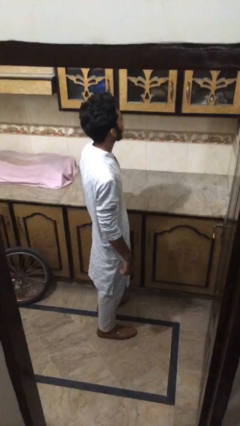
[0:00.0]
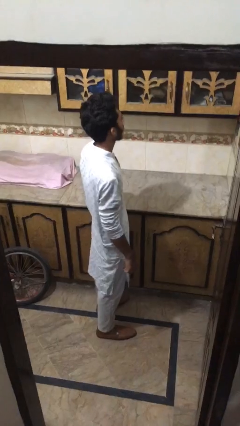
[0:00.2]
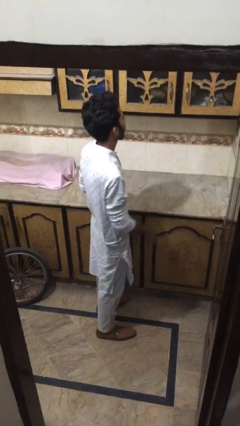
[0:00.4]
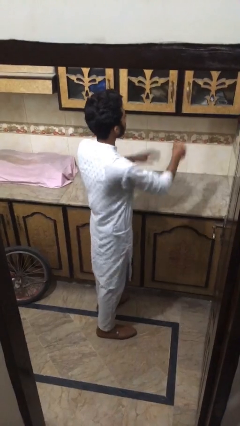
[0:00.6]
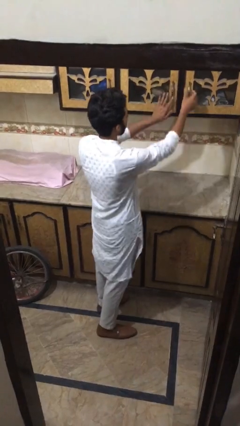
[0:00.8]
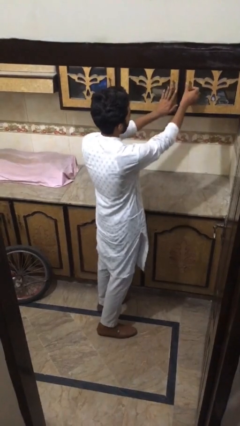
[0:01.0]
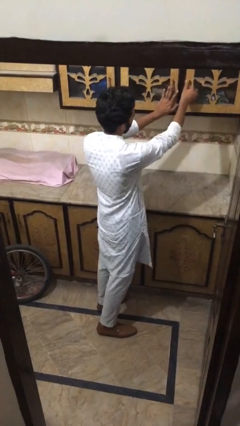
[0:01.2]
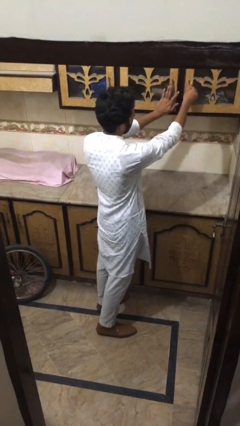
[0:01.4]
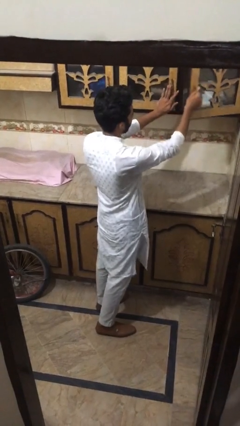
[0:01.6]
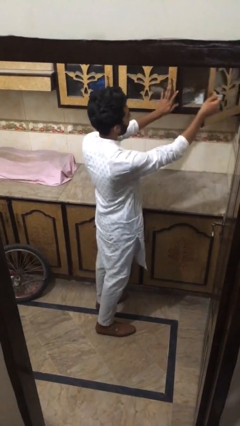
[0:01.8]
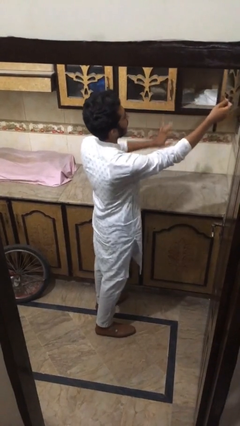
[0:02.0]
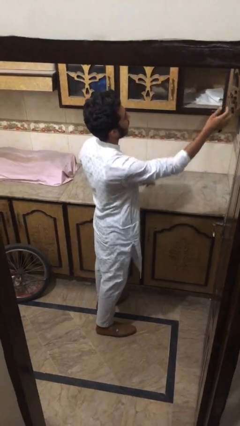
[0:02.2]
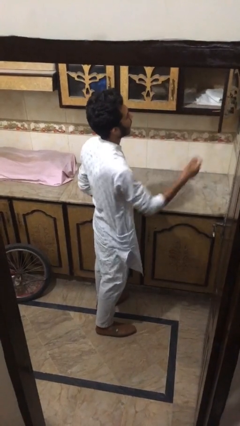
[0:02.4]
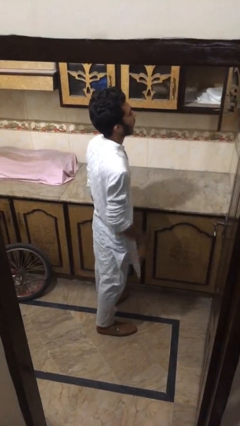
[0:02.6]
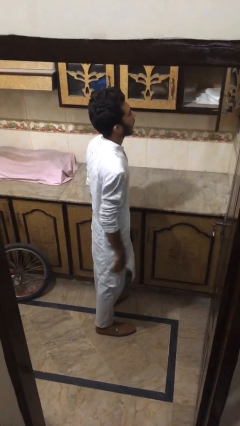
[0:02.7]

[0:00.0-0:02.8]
person opens cabinet

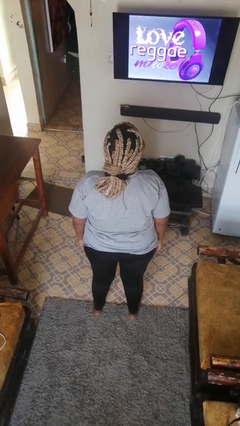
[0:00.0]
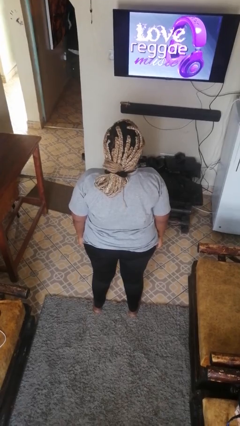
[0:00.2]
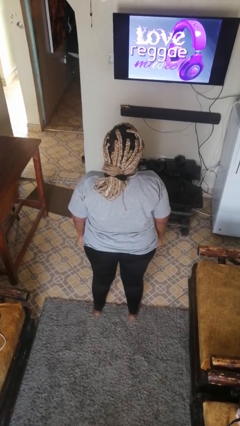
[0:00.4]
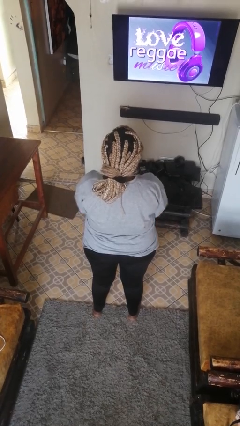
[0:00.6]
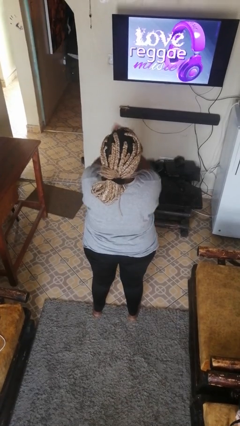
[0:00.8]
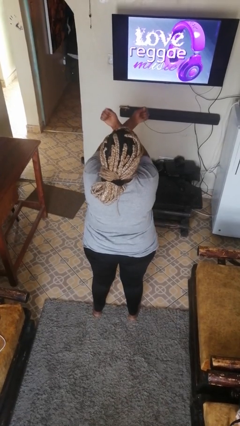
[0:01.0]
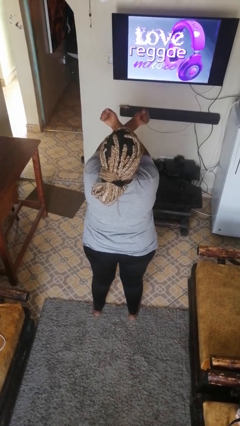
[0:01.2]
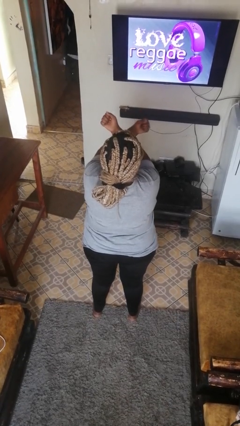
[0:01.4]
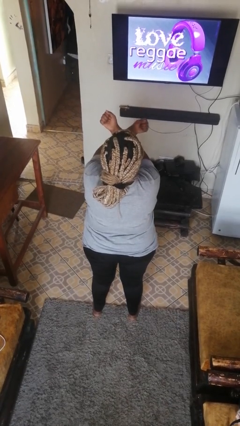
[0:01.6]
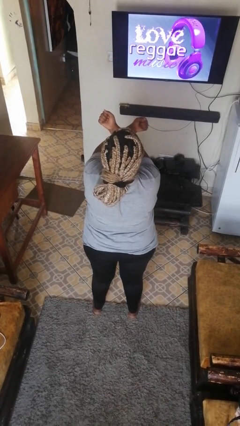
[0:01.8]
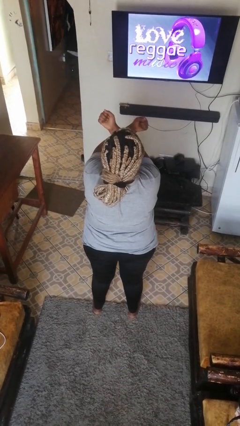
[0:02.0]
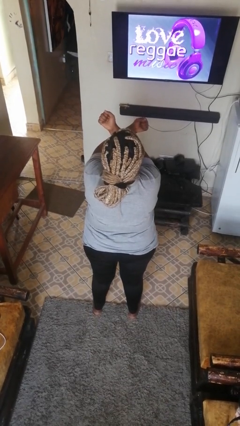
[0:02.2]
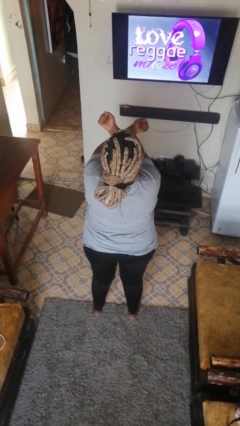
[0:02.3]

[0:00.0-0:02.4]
person gestures arms x

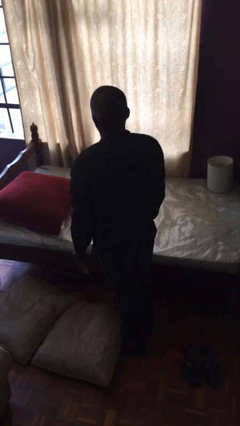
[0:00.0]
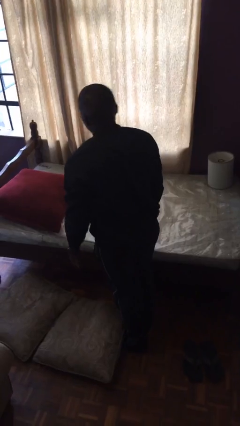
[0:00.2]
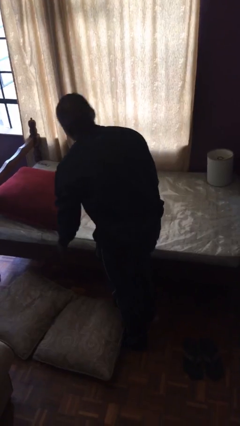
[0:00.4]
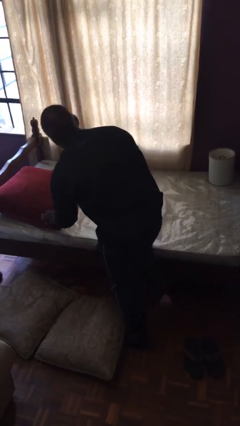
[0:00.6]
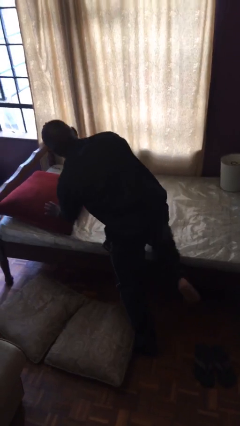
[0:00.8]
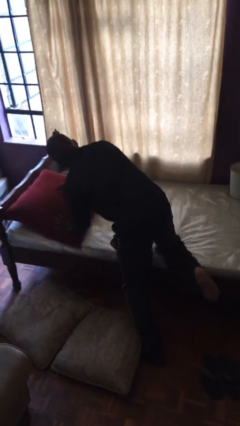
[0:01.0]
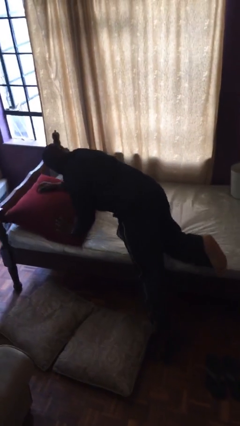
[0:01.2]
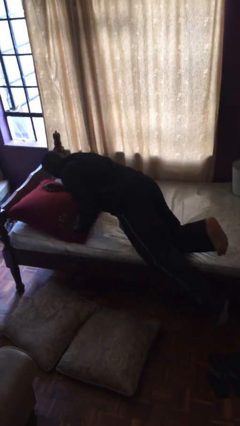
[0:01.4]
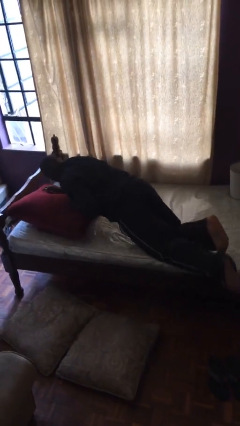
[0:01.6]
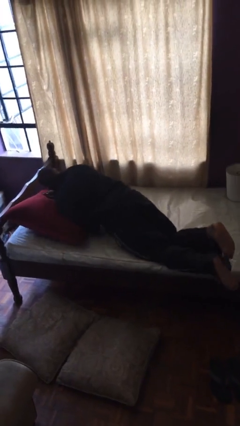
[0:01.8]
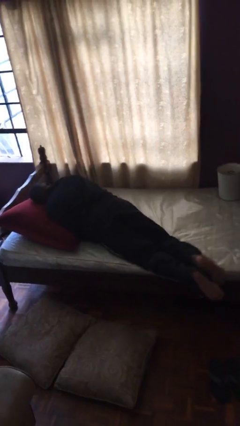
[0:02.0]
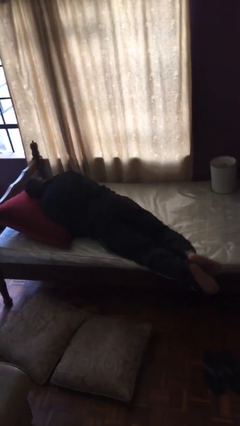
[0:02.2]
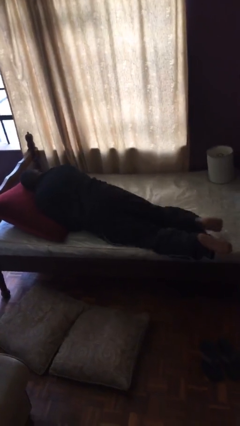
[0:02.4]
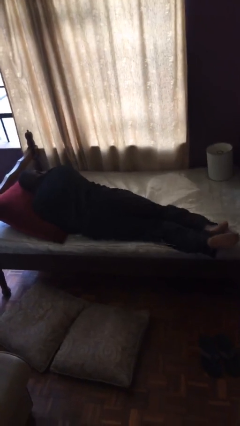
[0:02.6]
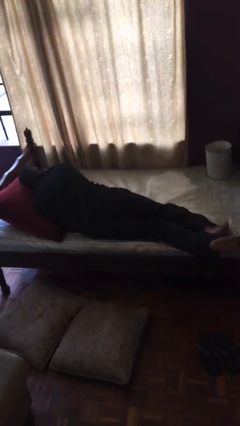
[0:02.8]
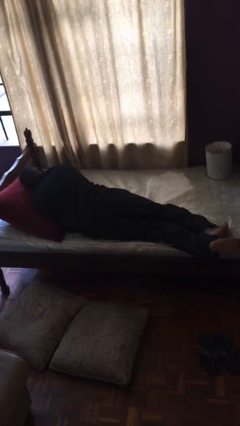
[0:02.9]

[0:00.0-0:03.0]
person lies down on bed

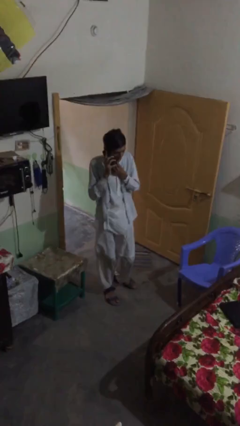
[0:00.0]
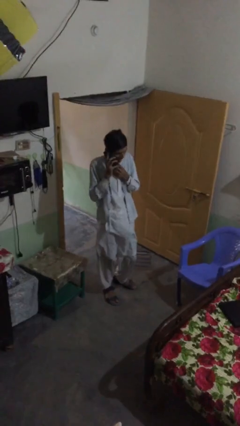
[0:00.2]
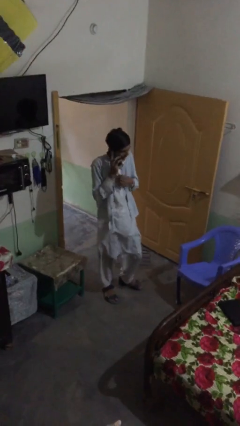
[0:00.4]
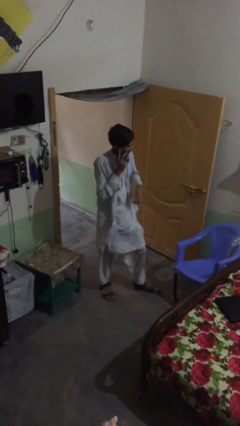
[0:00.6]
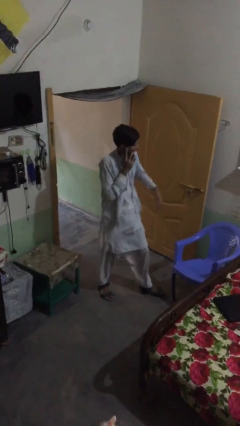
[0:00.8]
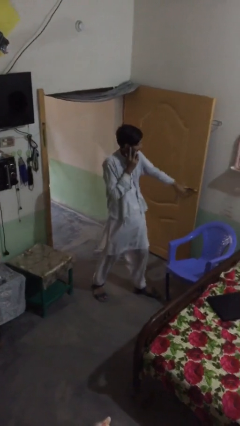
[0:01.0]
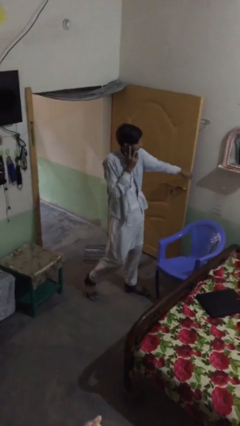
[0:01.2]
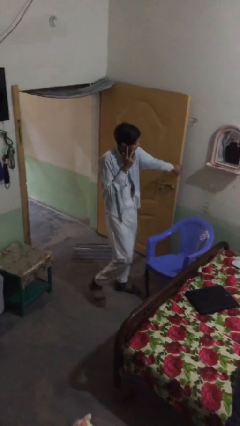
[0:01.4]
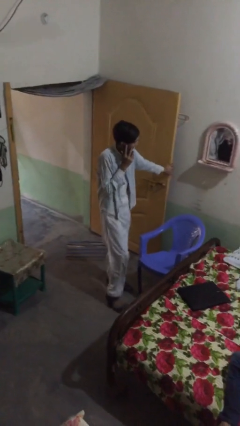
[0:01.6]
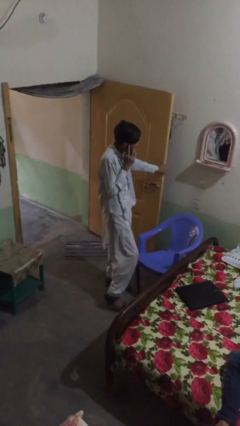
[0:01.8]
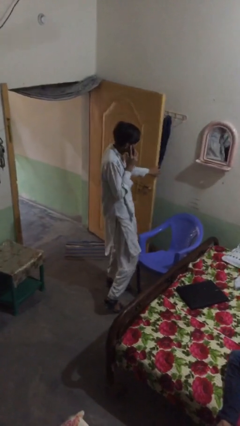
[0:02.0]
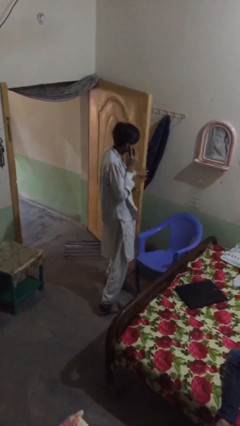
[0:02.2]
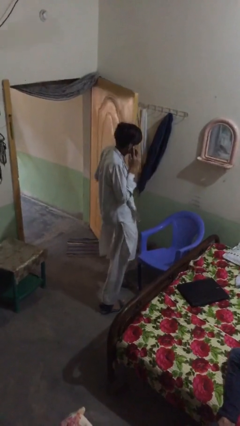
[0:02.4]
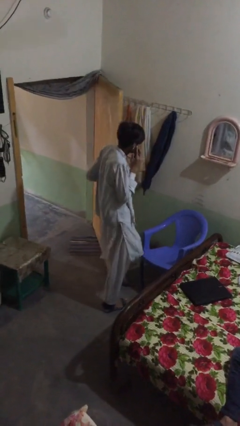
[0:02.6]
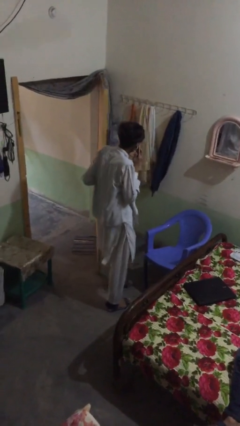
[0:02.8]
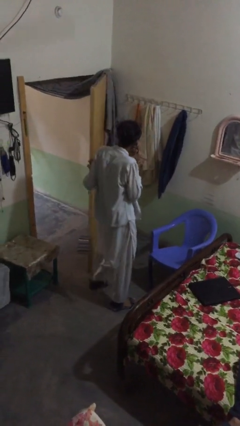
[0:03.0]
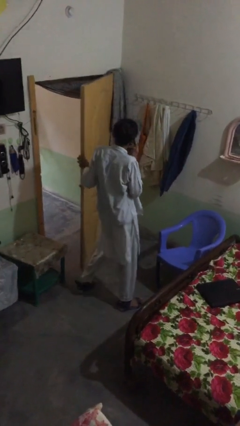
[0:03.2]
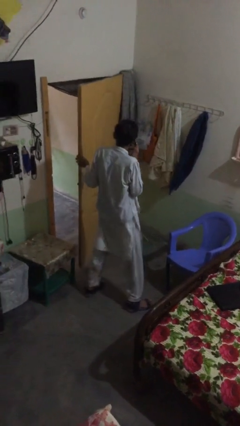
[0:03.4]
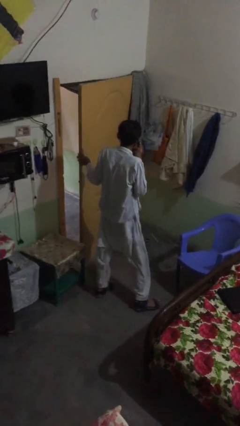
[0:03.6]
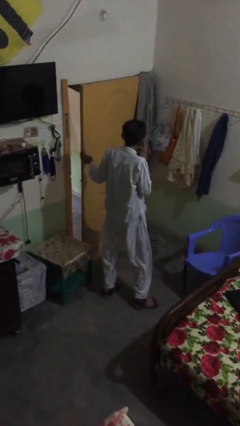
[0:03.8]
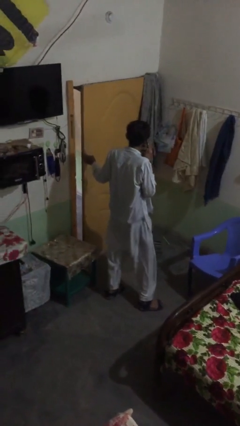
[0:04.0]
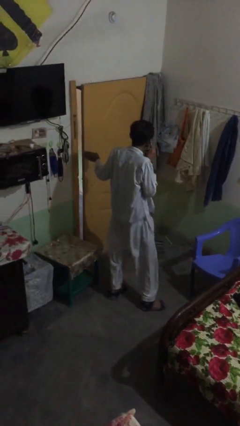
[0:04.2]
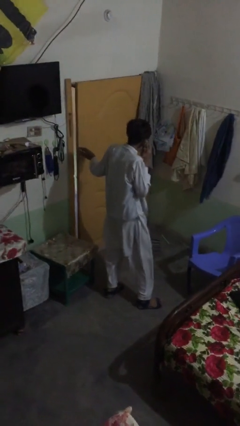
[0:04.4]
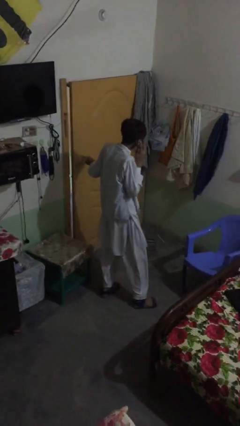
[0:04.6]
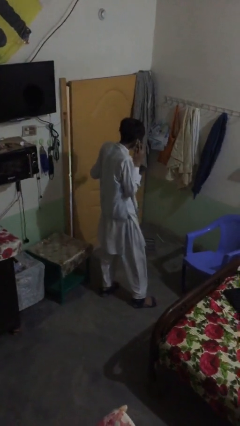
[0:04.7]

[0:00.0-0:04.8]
person closes facility door

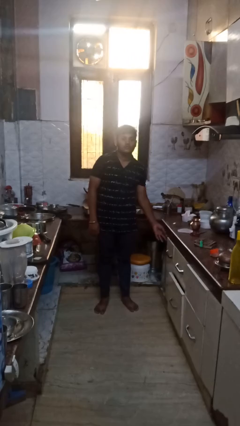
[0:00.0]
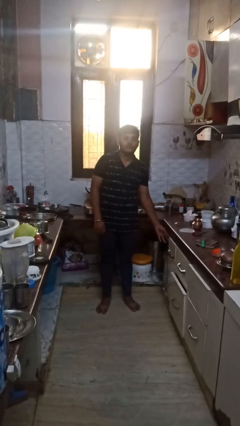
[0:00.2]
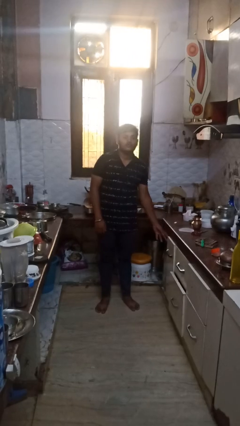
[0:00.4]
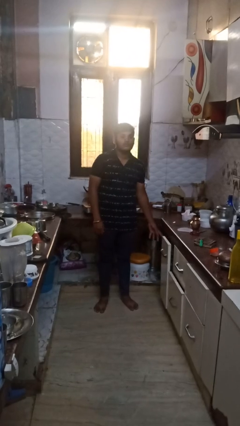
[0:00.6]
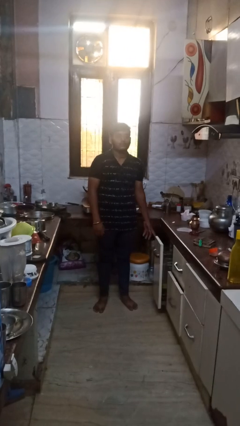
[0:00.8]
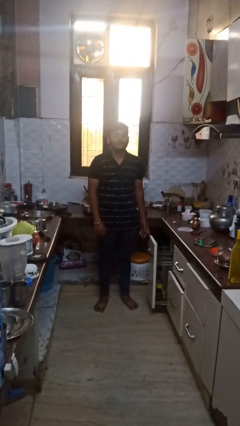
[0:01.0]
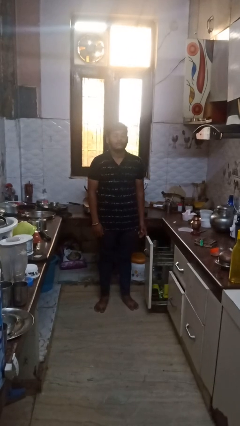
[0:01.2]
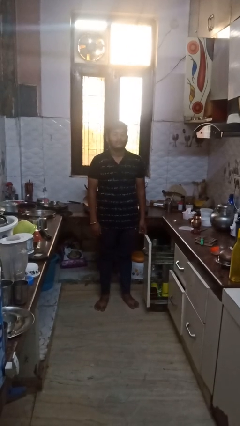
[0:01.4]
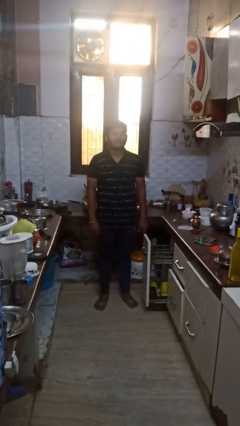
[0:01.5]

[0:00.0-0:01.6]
person opens dishwasher

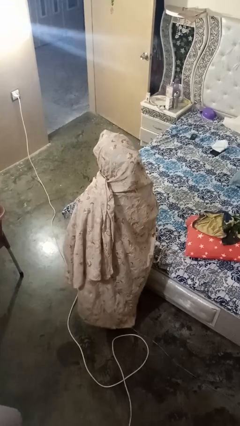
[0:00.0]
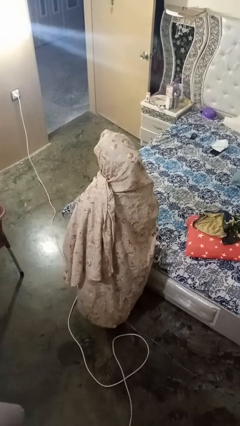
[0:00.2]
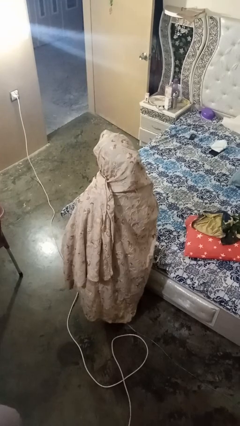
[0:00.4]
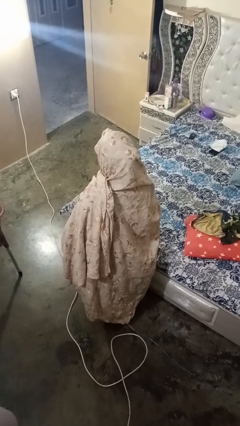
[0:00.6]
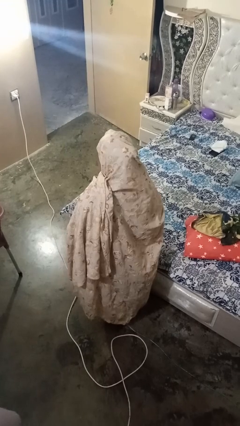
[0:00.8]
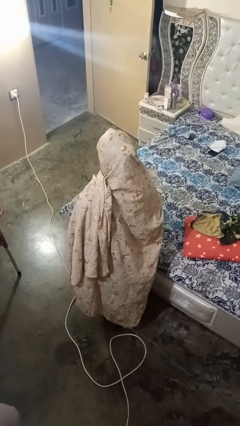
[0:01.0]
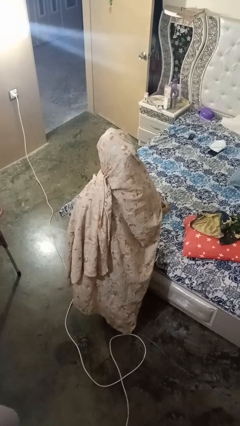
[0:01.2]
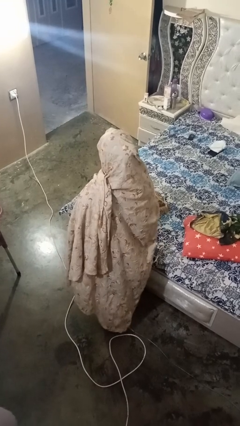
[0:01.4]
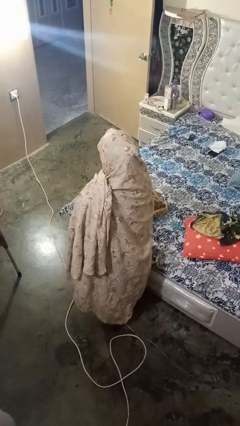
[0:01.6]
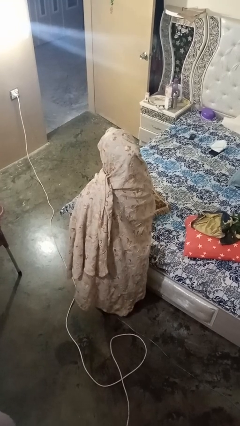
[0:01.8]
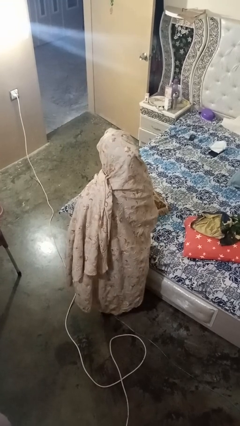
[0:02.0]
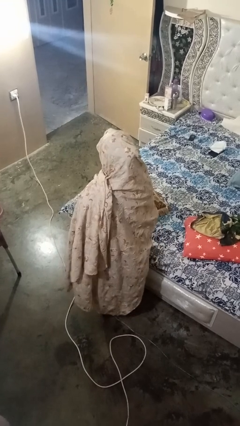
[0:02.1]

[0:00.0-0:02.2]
person puts down object on bed

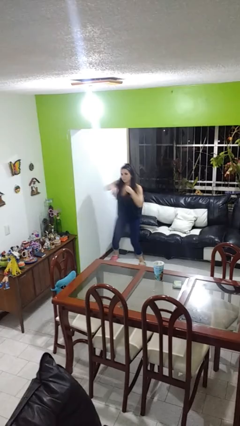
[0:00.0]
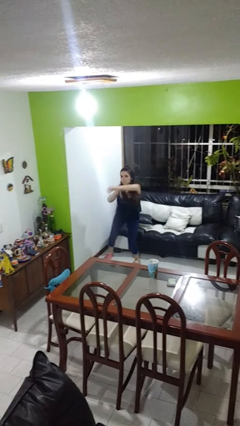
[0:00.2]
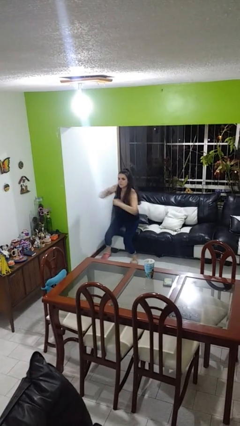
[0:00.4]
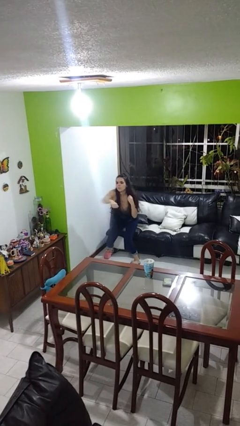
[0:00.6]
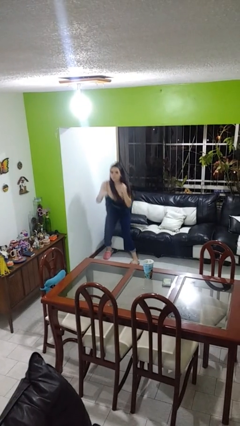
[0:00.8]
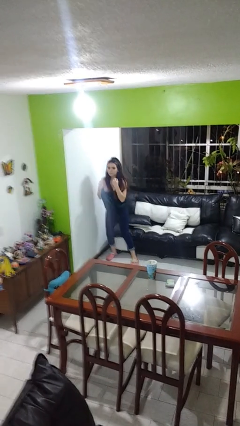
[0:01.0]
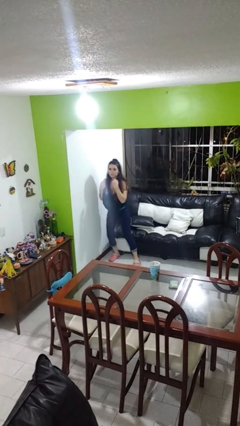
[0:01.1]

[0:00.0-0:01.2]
person punches
